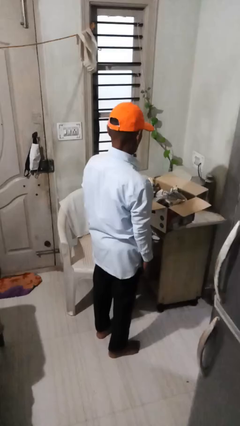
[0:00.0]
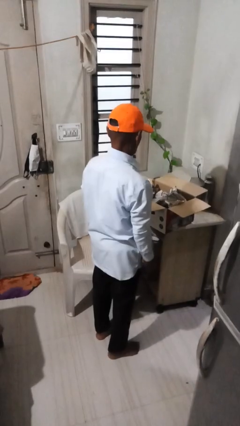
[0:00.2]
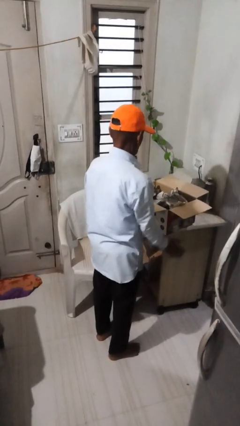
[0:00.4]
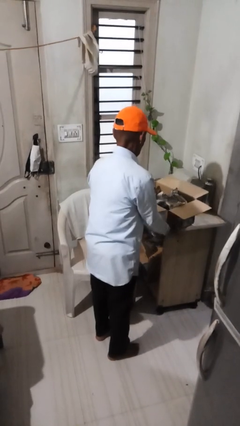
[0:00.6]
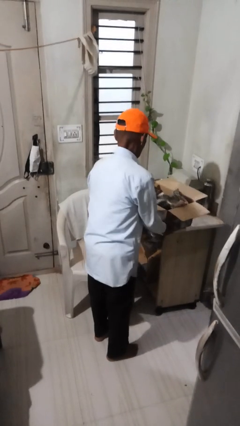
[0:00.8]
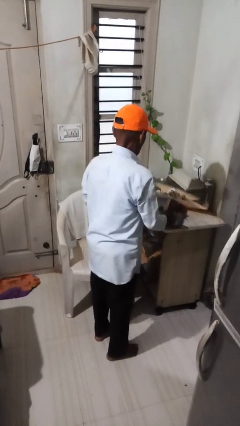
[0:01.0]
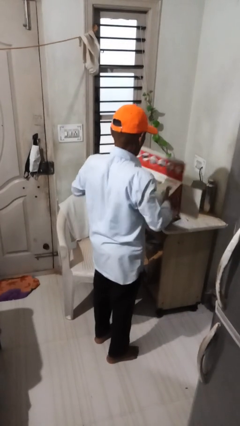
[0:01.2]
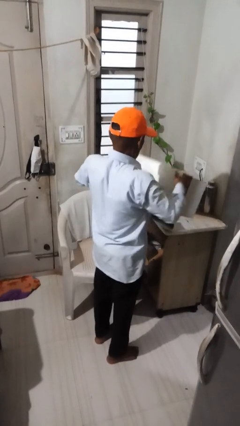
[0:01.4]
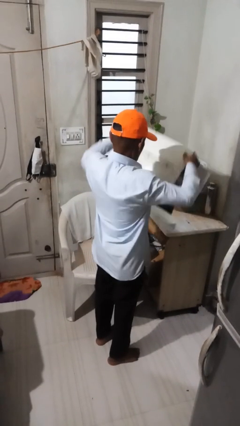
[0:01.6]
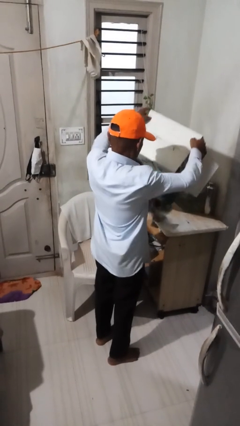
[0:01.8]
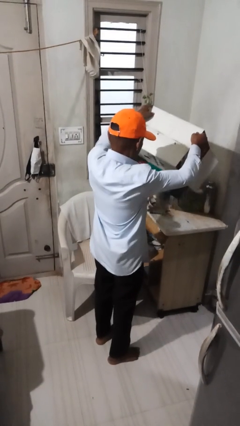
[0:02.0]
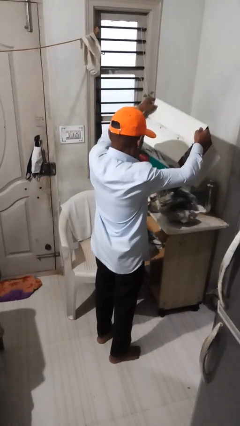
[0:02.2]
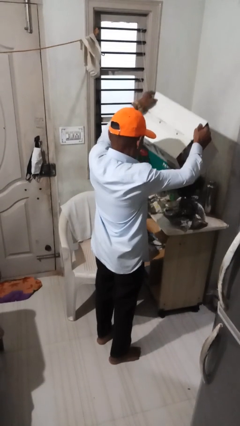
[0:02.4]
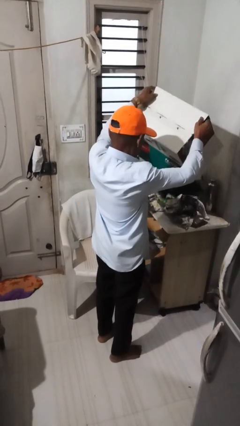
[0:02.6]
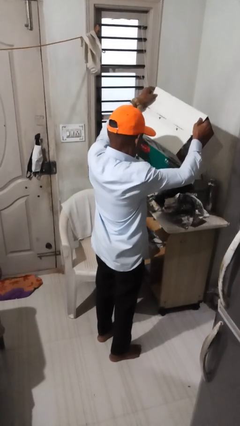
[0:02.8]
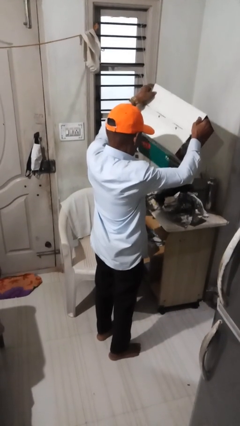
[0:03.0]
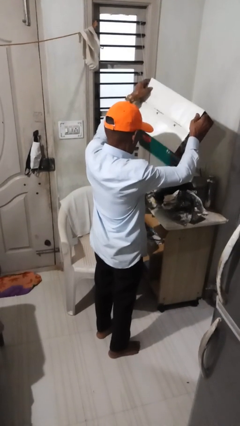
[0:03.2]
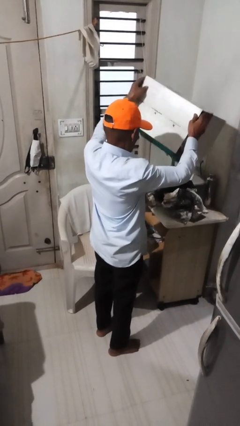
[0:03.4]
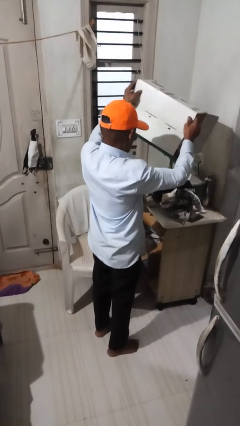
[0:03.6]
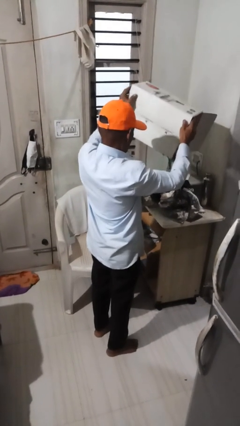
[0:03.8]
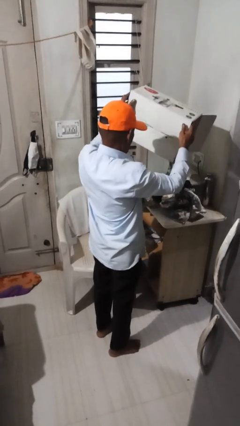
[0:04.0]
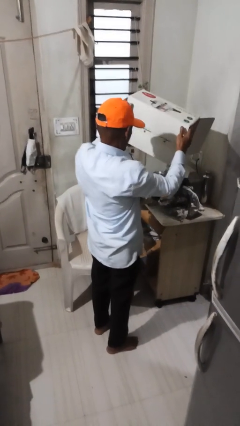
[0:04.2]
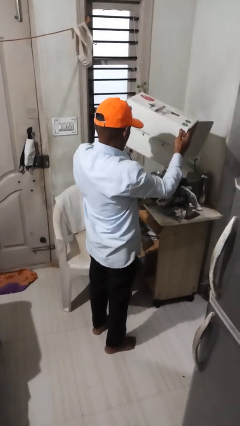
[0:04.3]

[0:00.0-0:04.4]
person unloads box onto table

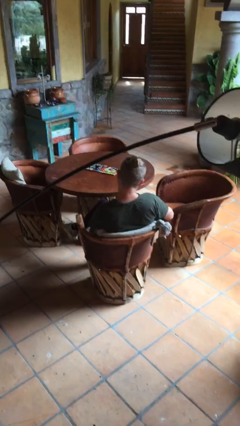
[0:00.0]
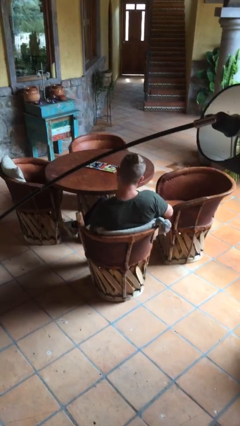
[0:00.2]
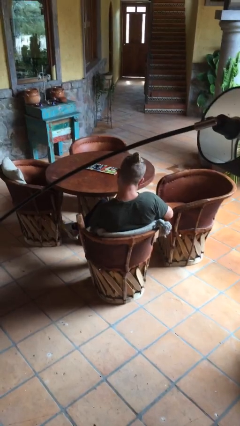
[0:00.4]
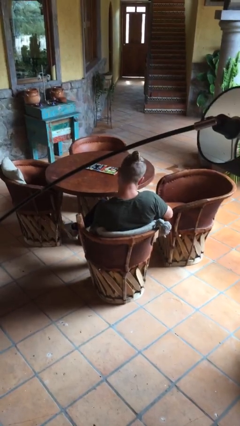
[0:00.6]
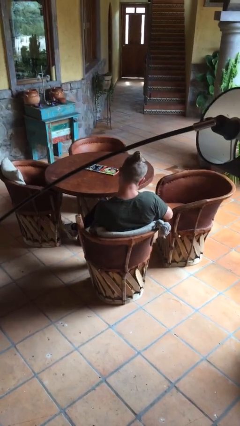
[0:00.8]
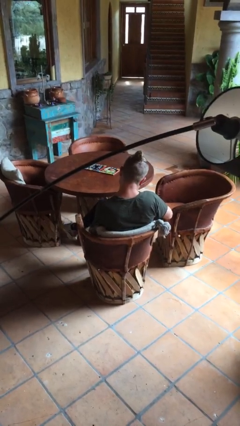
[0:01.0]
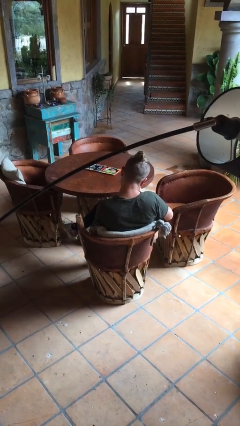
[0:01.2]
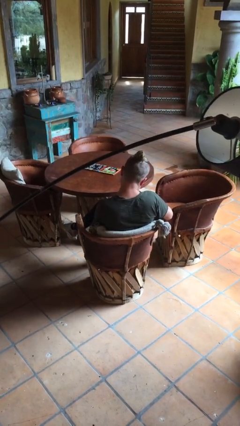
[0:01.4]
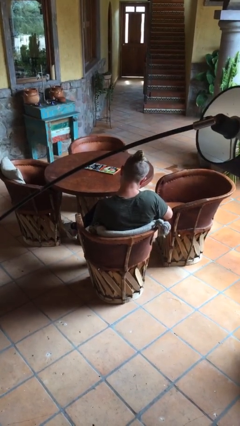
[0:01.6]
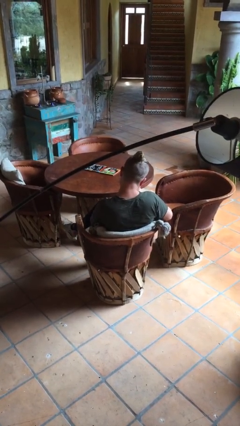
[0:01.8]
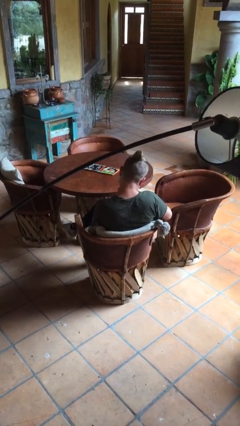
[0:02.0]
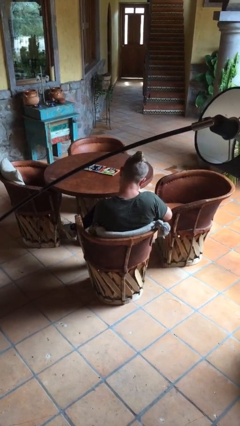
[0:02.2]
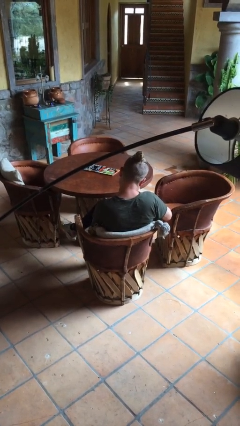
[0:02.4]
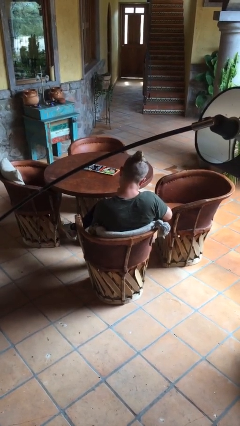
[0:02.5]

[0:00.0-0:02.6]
person files fingernails

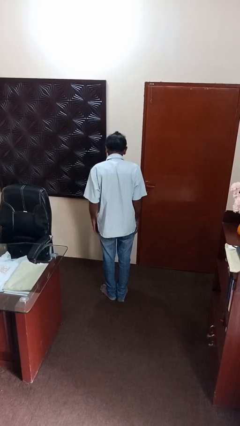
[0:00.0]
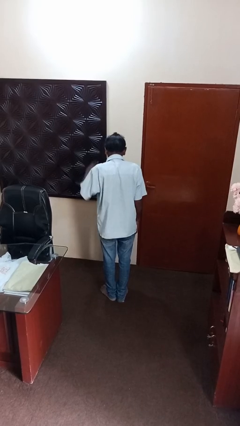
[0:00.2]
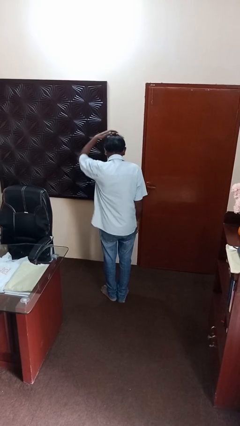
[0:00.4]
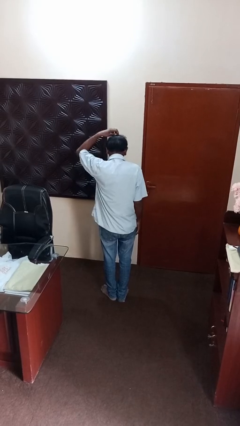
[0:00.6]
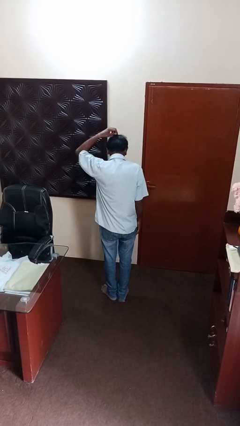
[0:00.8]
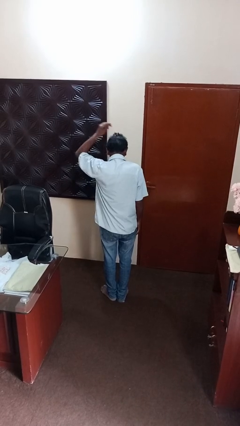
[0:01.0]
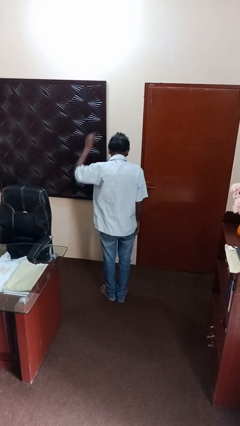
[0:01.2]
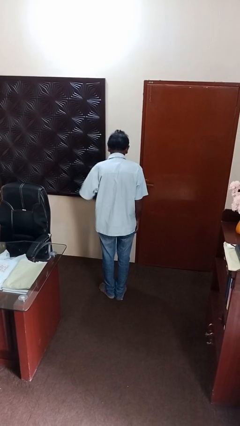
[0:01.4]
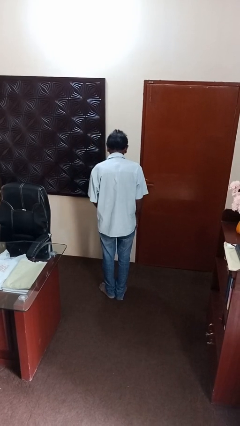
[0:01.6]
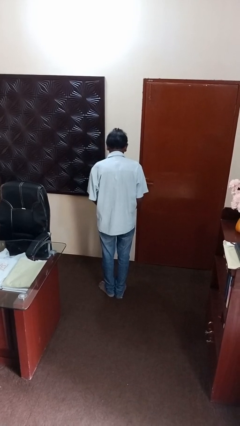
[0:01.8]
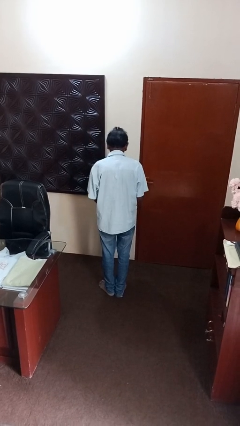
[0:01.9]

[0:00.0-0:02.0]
person takes off hairtie

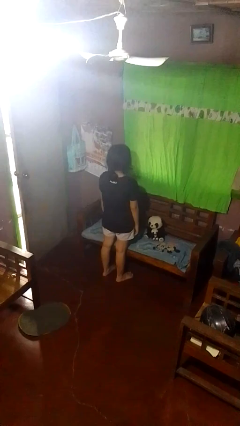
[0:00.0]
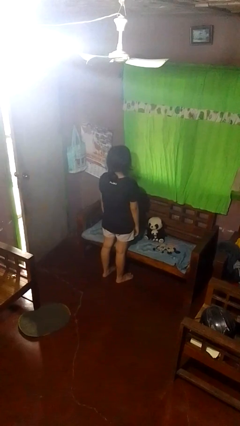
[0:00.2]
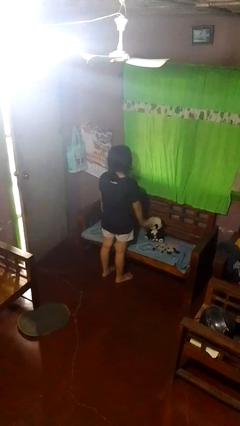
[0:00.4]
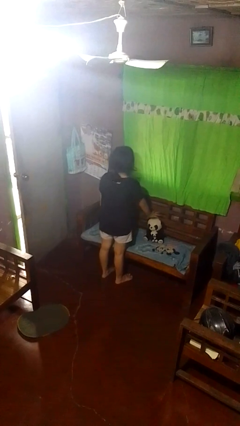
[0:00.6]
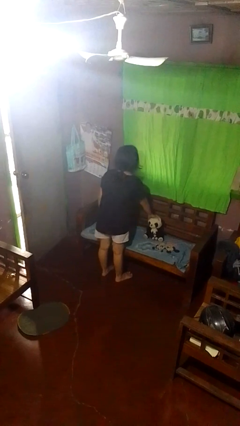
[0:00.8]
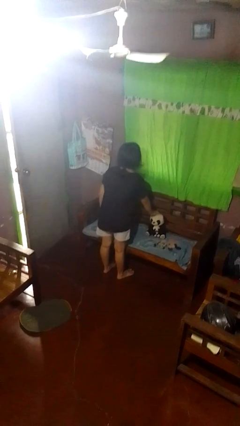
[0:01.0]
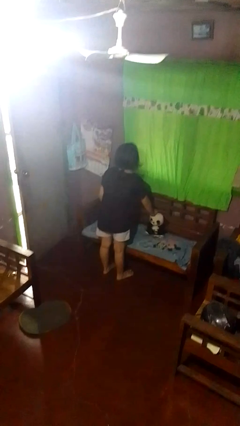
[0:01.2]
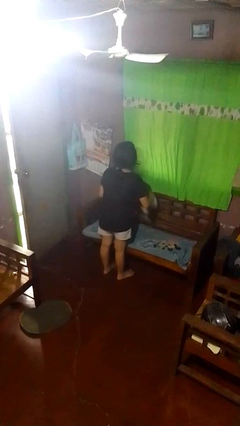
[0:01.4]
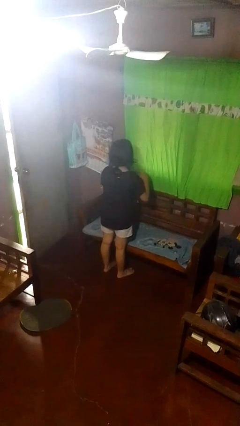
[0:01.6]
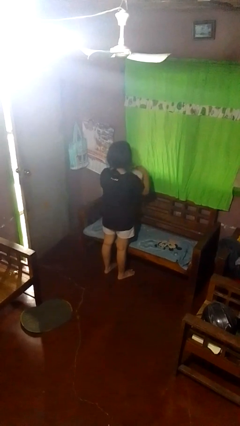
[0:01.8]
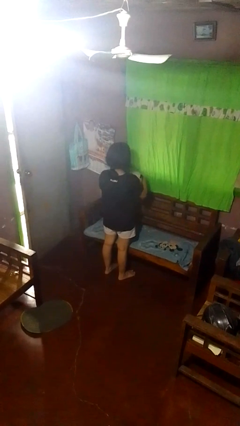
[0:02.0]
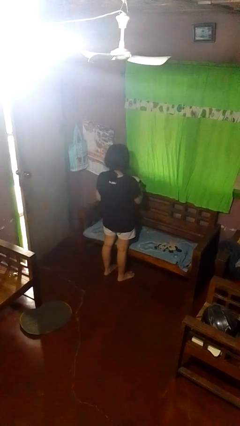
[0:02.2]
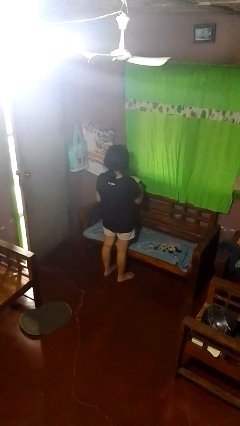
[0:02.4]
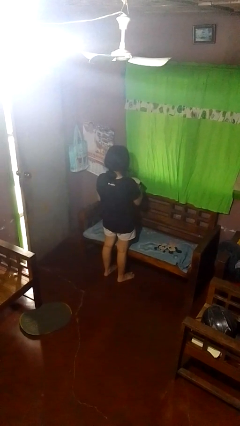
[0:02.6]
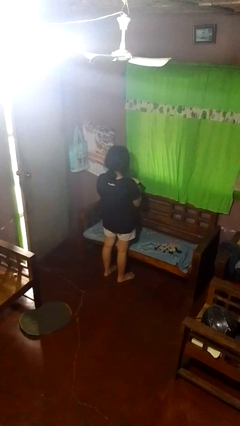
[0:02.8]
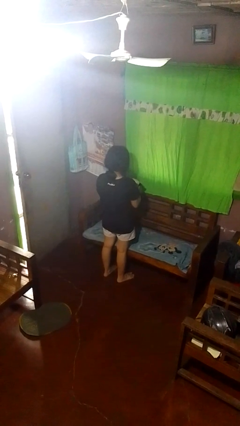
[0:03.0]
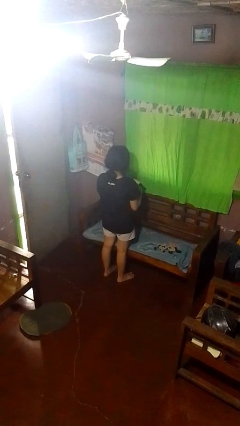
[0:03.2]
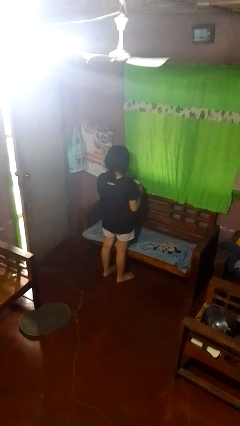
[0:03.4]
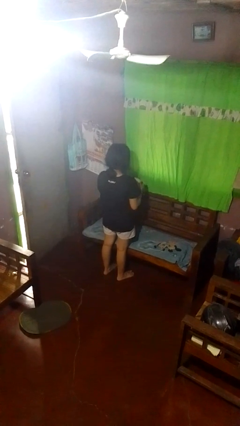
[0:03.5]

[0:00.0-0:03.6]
person picks up object from couch

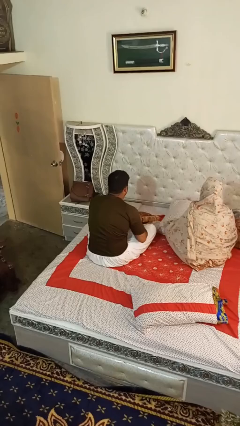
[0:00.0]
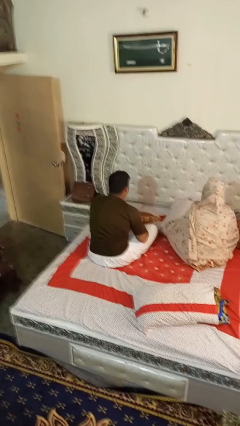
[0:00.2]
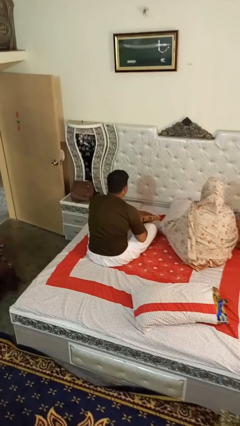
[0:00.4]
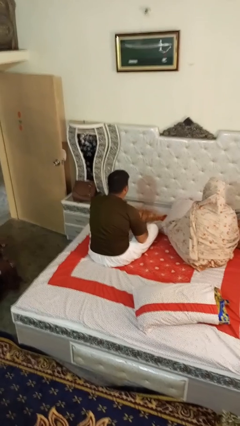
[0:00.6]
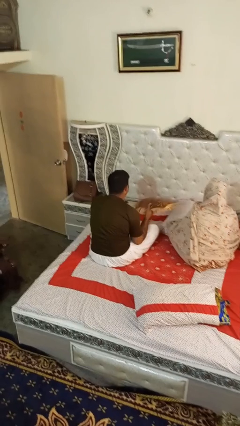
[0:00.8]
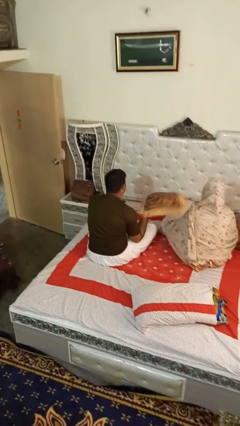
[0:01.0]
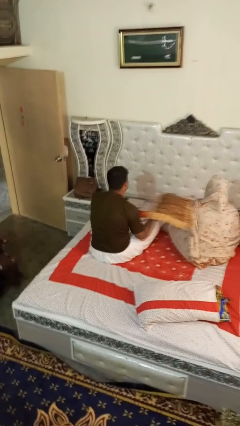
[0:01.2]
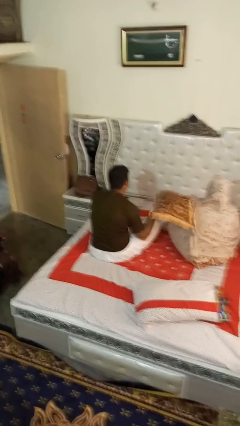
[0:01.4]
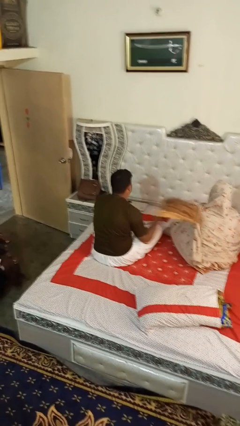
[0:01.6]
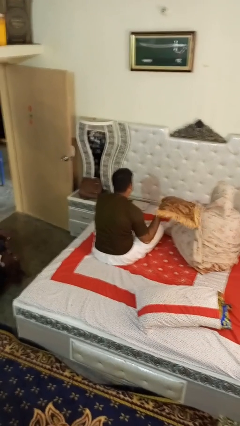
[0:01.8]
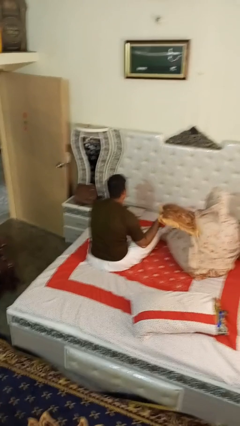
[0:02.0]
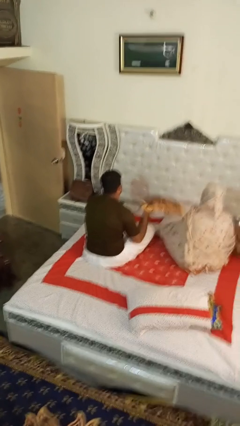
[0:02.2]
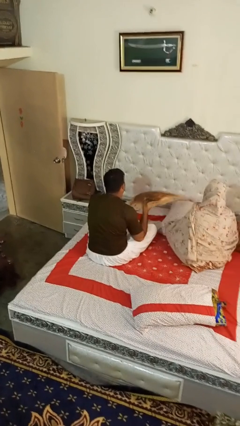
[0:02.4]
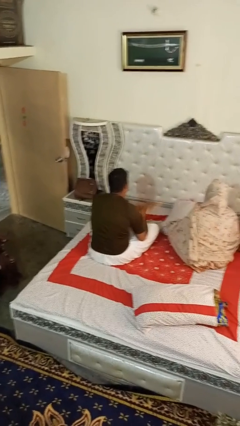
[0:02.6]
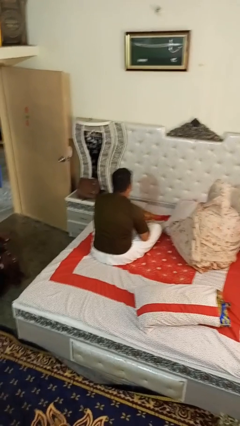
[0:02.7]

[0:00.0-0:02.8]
person hits person with pillow

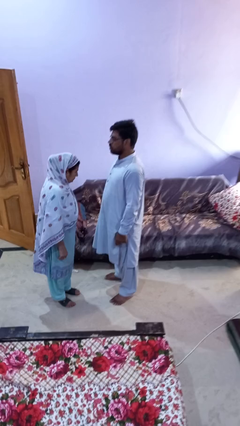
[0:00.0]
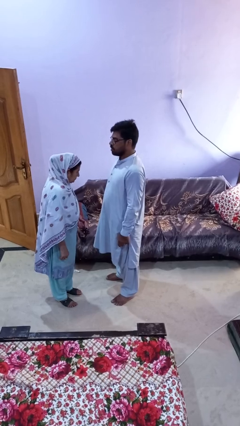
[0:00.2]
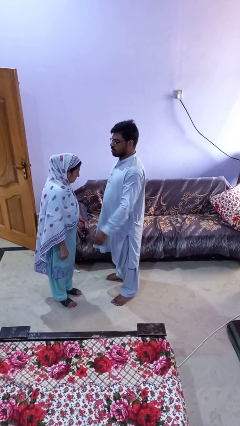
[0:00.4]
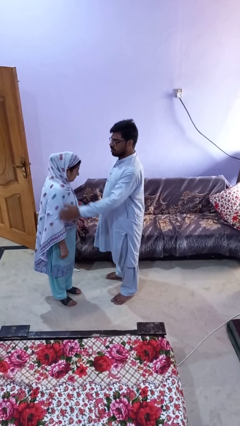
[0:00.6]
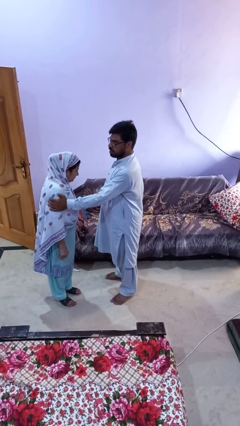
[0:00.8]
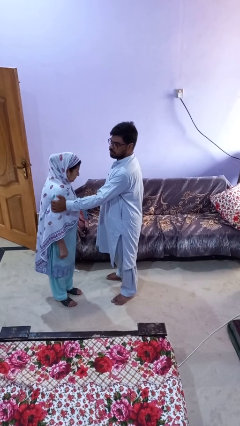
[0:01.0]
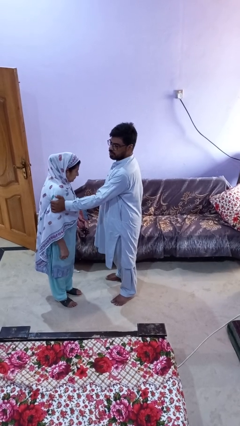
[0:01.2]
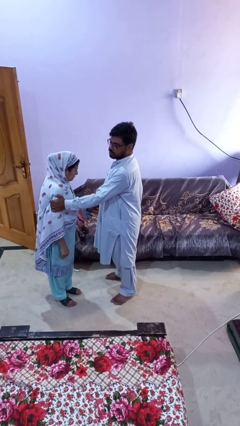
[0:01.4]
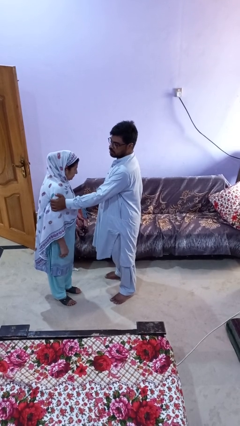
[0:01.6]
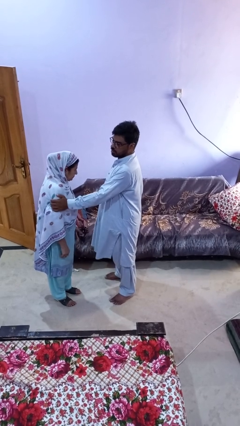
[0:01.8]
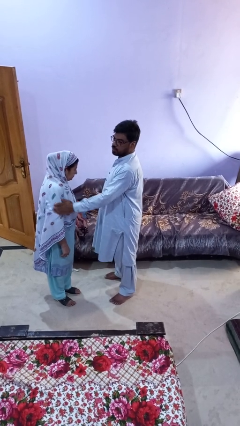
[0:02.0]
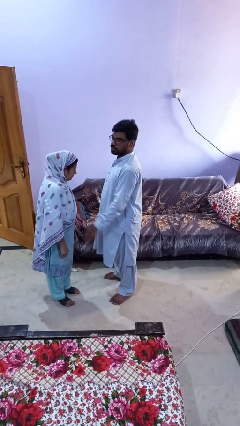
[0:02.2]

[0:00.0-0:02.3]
person grabs person by bicep
